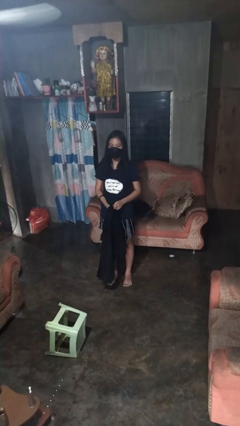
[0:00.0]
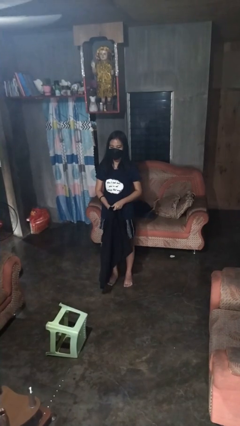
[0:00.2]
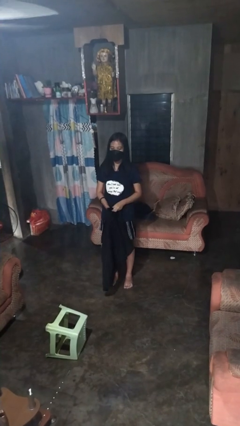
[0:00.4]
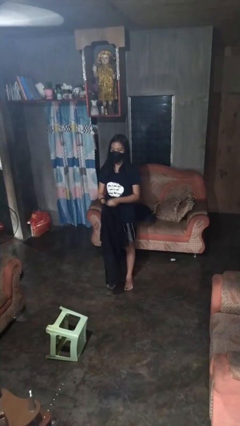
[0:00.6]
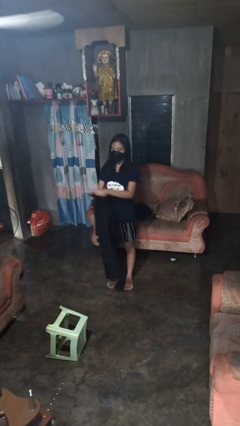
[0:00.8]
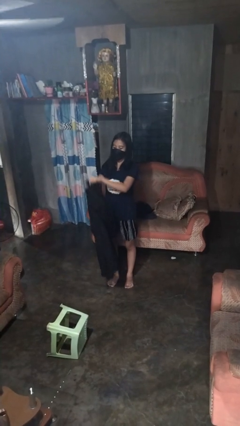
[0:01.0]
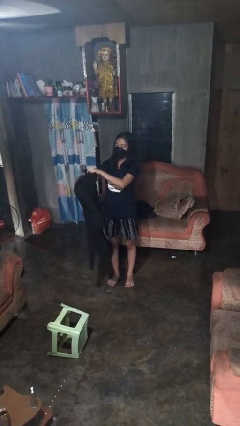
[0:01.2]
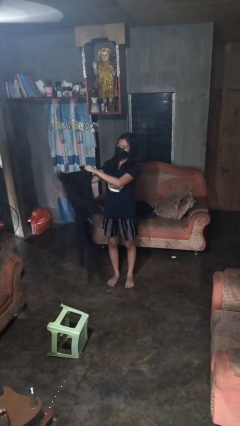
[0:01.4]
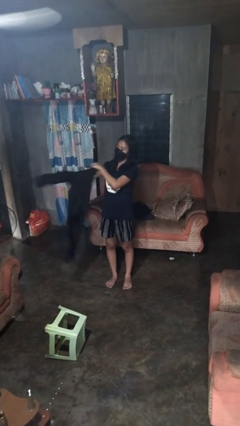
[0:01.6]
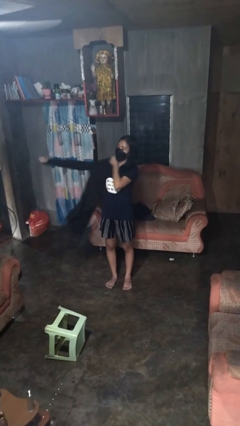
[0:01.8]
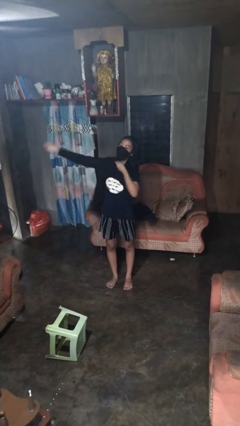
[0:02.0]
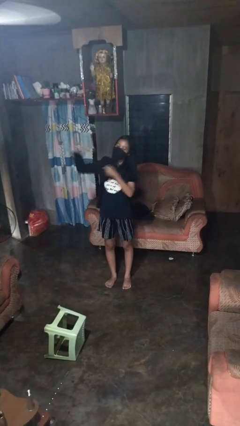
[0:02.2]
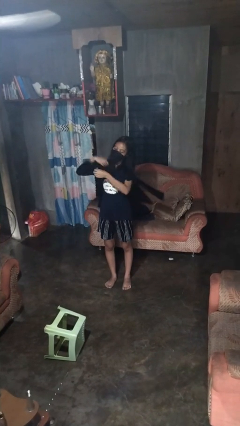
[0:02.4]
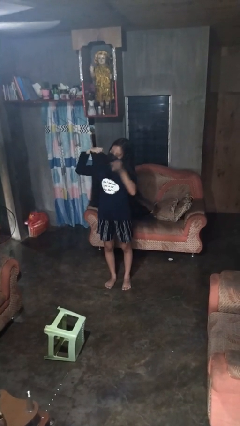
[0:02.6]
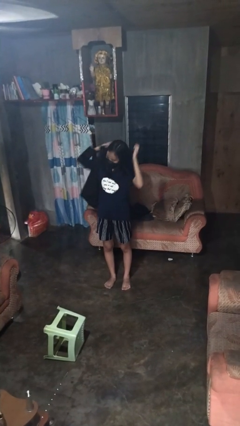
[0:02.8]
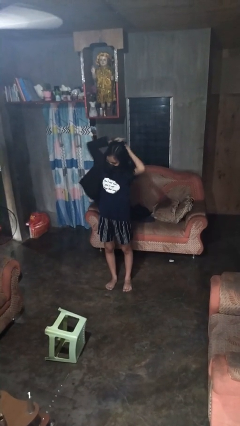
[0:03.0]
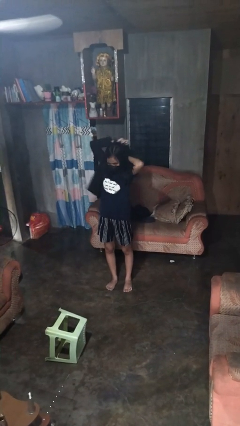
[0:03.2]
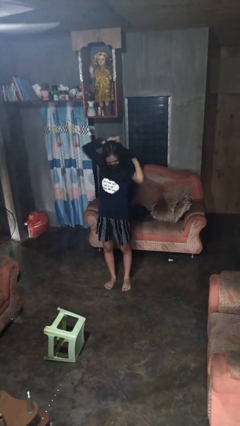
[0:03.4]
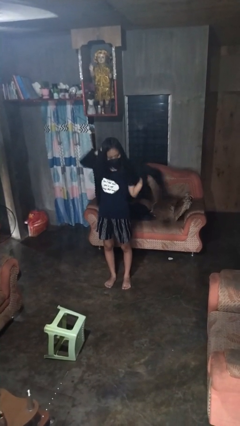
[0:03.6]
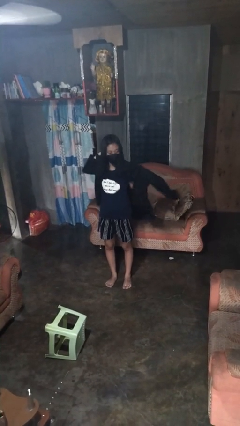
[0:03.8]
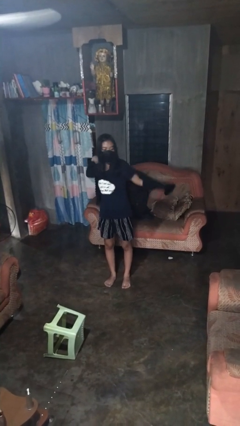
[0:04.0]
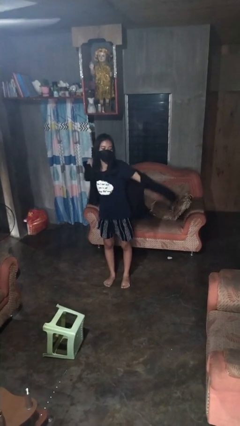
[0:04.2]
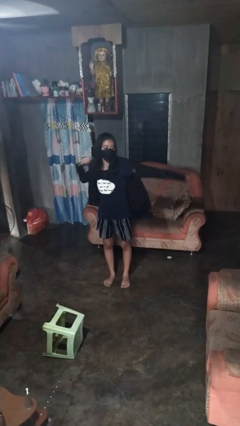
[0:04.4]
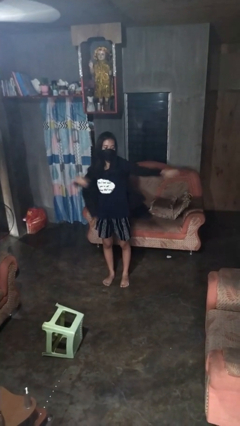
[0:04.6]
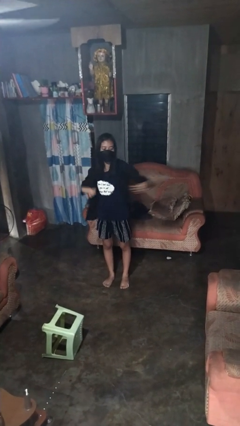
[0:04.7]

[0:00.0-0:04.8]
person puts on shirt

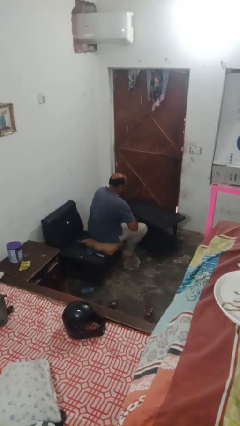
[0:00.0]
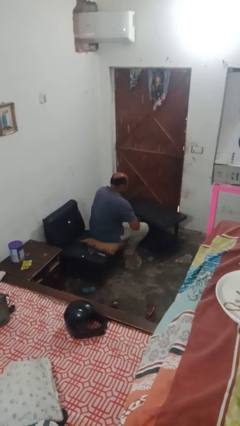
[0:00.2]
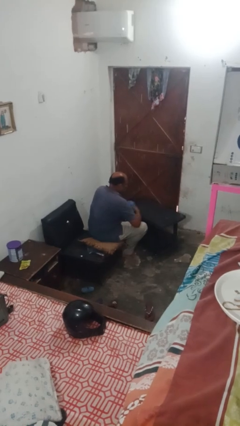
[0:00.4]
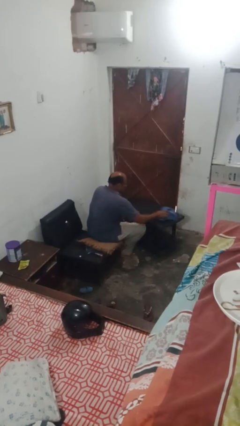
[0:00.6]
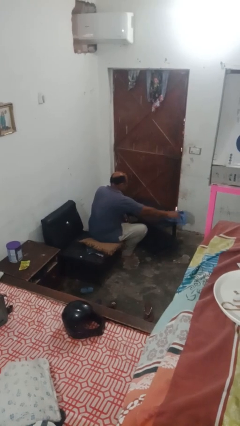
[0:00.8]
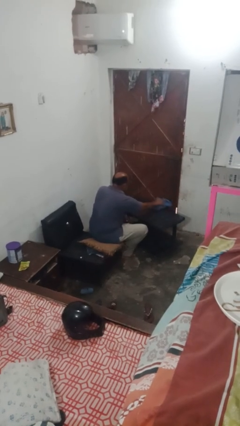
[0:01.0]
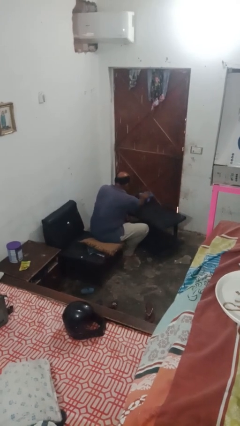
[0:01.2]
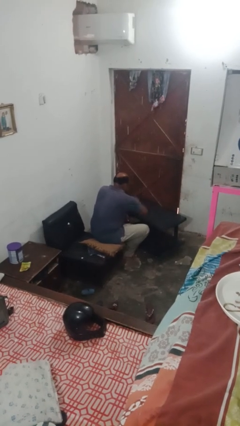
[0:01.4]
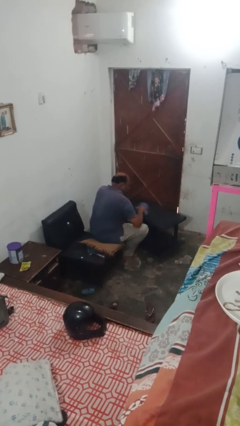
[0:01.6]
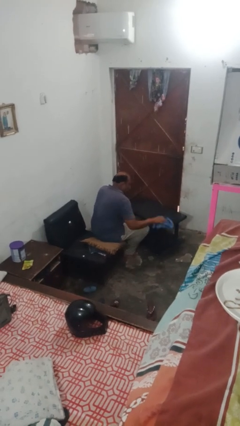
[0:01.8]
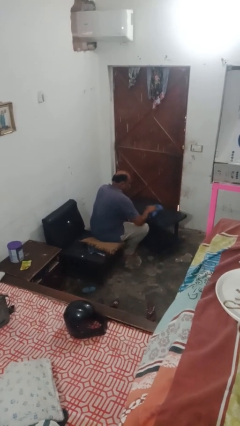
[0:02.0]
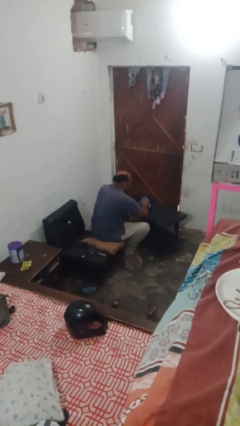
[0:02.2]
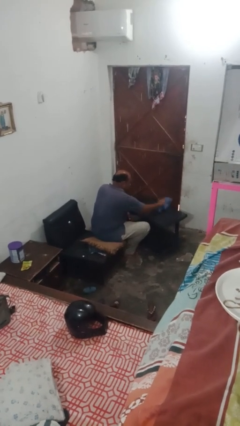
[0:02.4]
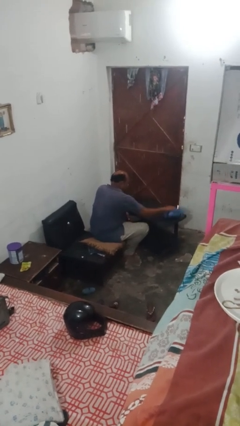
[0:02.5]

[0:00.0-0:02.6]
person cleans table with rag

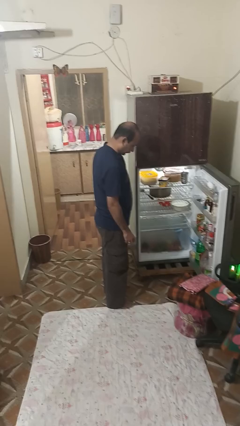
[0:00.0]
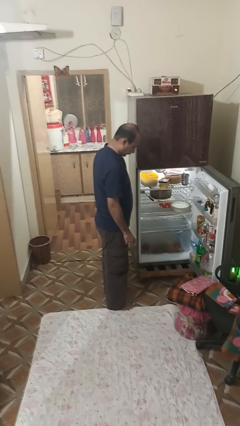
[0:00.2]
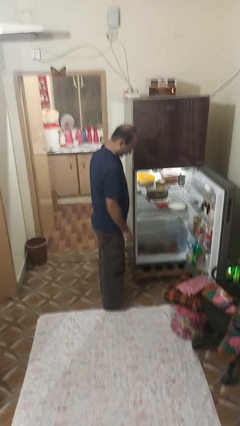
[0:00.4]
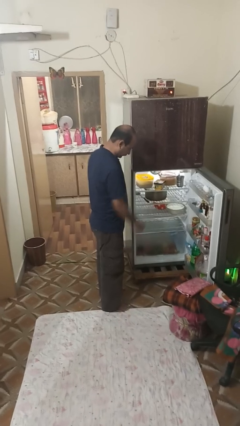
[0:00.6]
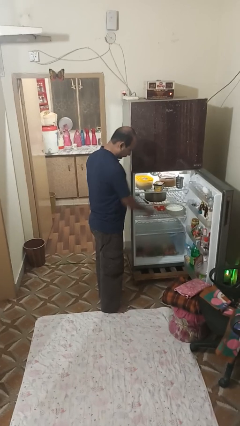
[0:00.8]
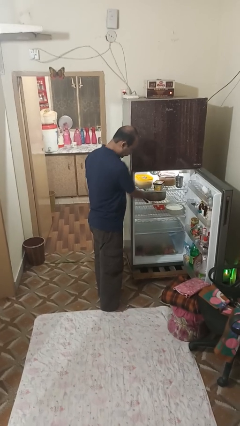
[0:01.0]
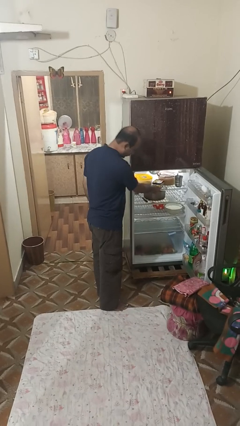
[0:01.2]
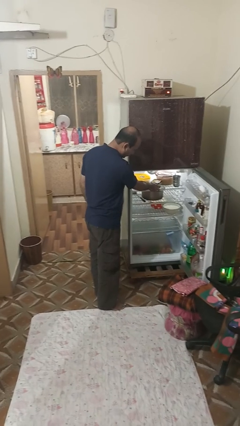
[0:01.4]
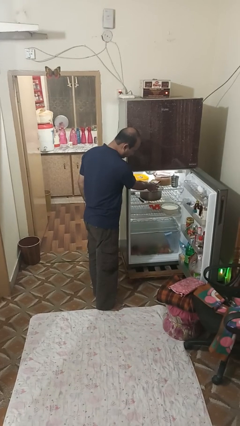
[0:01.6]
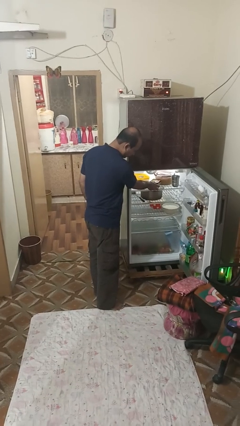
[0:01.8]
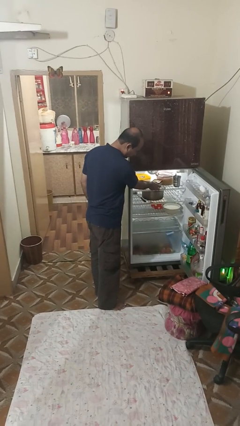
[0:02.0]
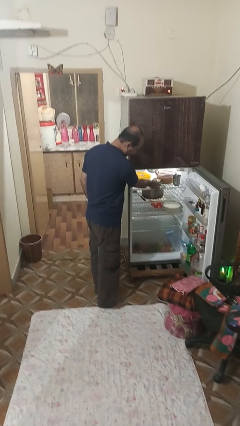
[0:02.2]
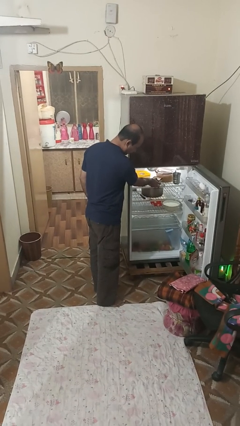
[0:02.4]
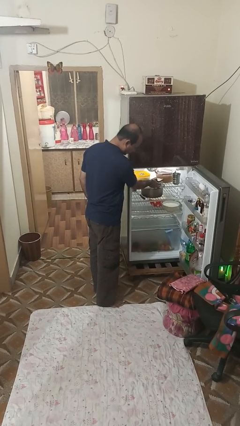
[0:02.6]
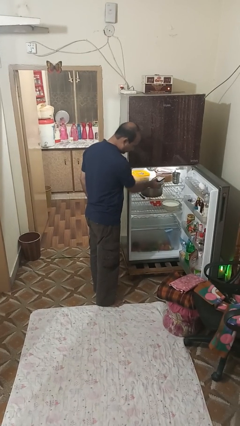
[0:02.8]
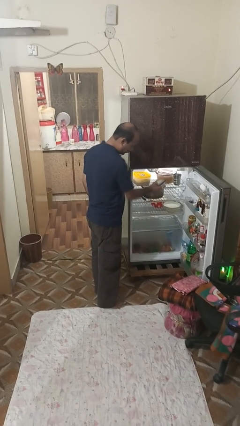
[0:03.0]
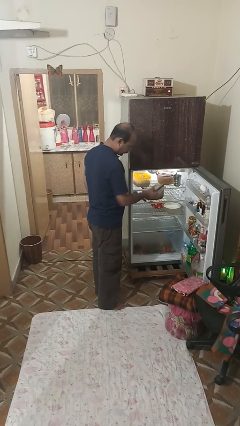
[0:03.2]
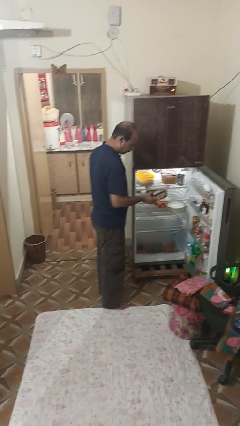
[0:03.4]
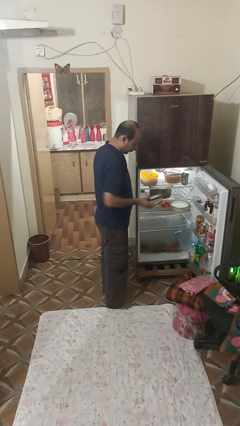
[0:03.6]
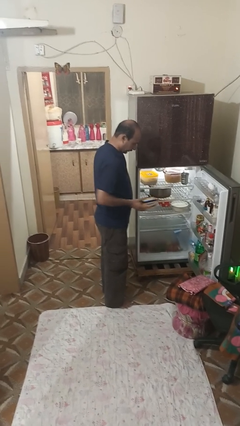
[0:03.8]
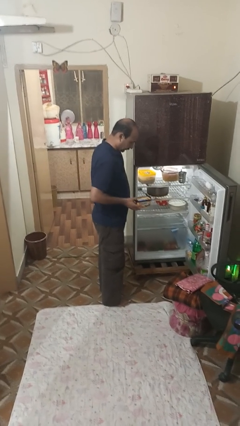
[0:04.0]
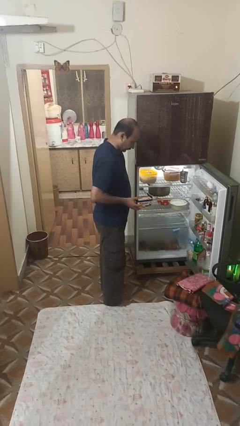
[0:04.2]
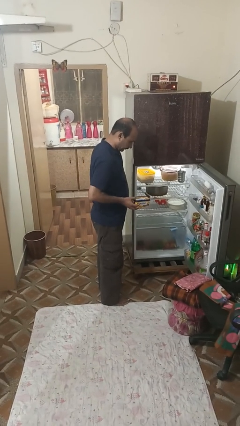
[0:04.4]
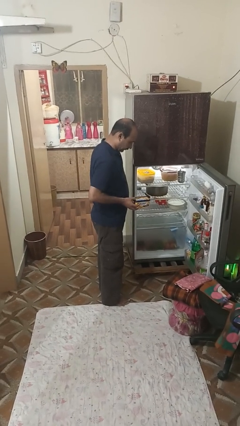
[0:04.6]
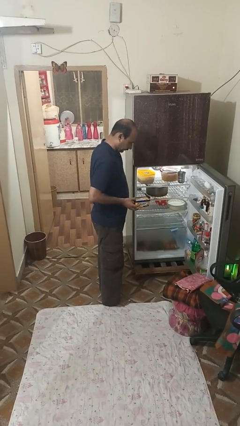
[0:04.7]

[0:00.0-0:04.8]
person takes object from refrigerator

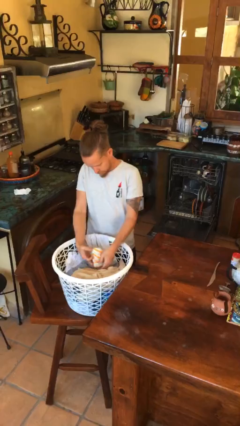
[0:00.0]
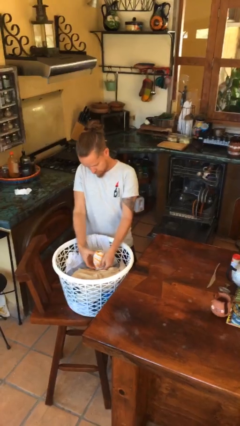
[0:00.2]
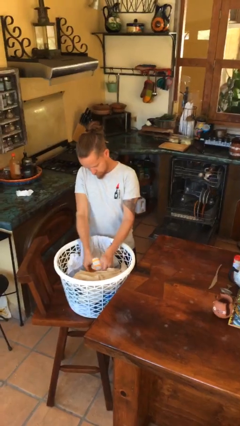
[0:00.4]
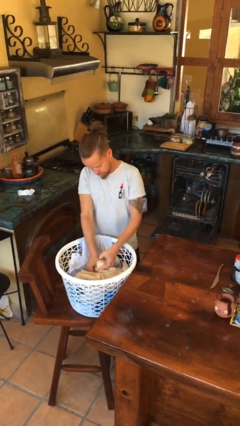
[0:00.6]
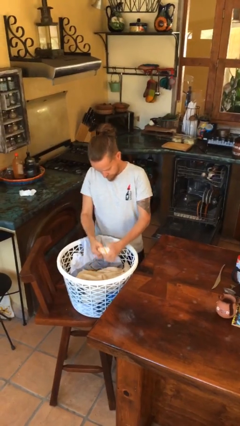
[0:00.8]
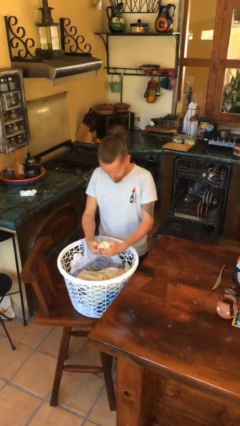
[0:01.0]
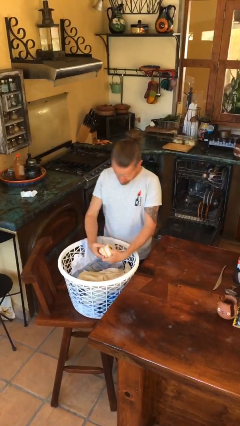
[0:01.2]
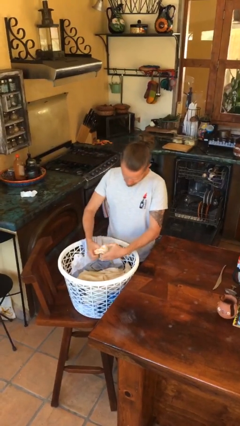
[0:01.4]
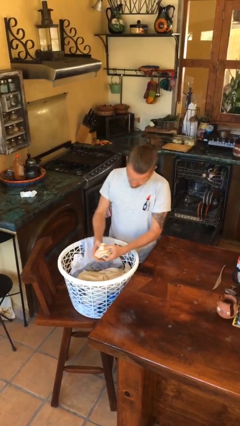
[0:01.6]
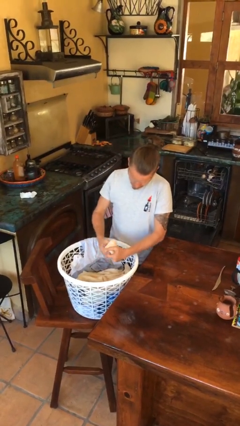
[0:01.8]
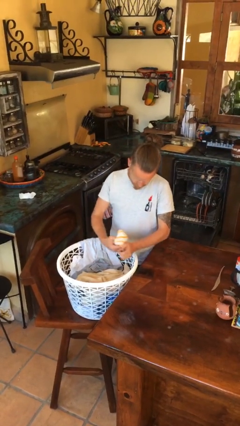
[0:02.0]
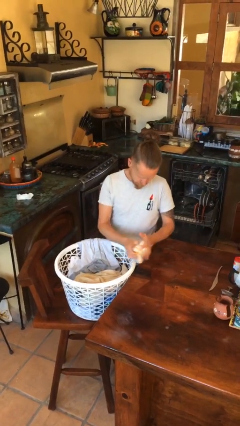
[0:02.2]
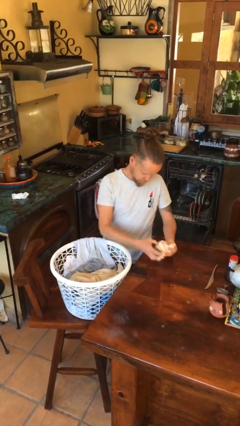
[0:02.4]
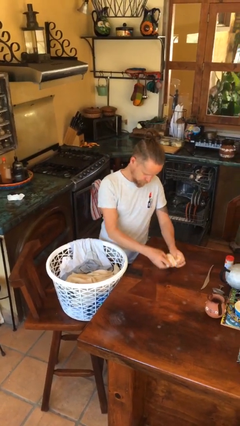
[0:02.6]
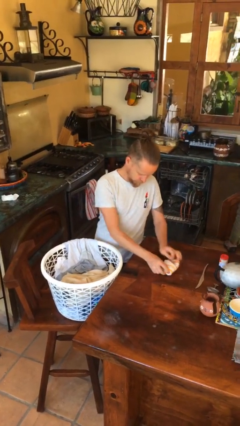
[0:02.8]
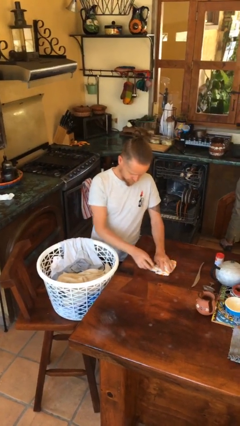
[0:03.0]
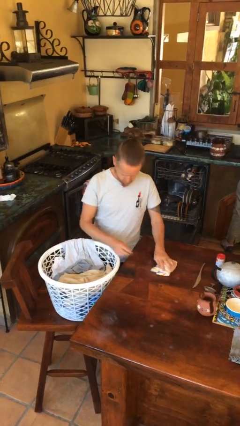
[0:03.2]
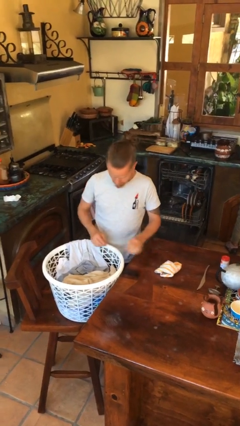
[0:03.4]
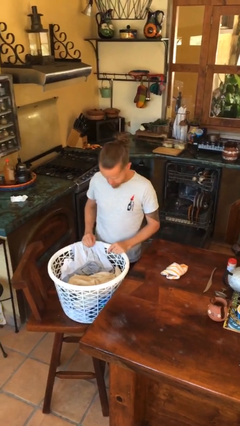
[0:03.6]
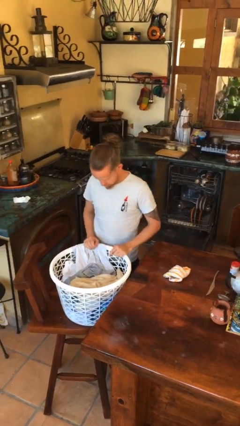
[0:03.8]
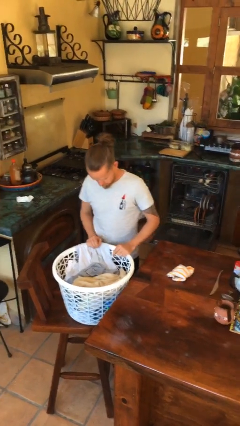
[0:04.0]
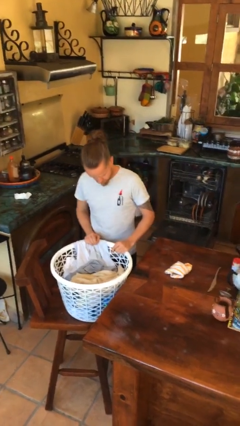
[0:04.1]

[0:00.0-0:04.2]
person folds socks

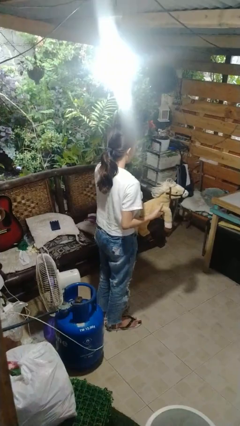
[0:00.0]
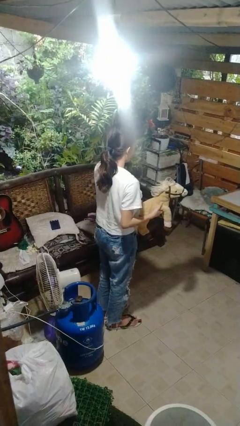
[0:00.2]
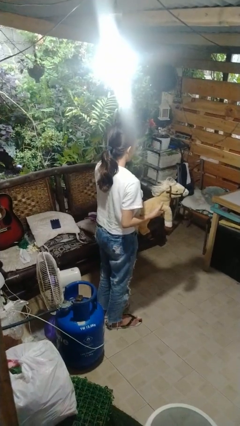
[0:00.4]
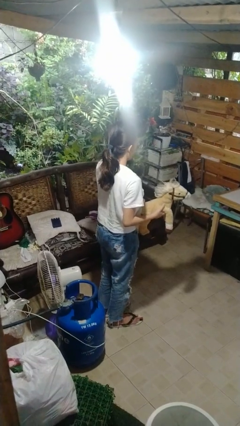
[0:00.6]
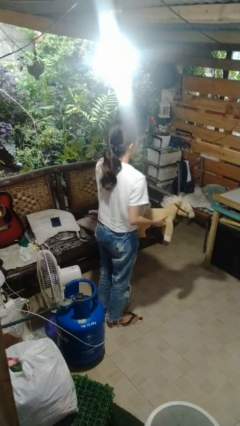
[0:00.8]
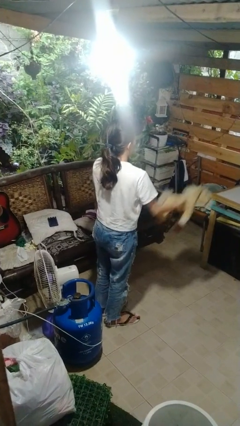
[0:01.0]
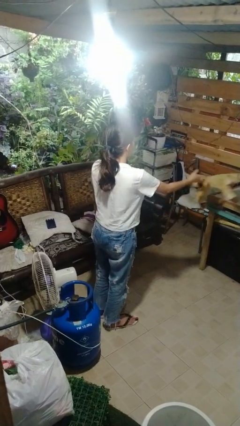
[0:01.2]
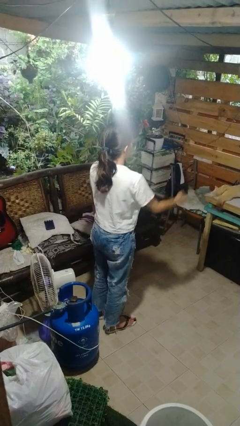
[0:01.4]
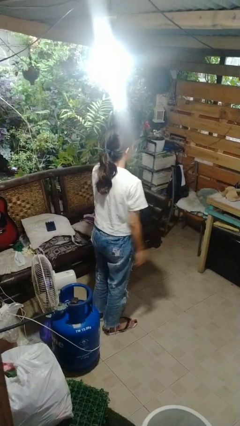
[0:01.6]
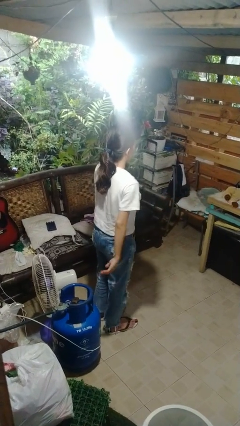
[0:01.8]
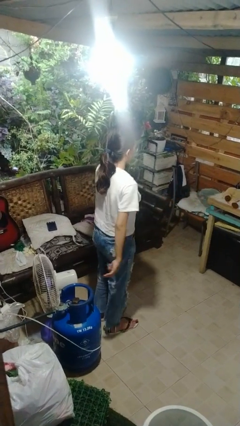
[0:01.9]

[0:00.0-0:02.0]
person throws object on table
